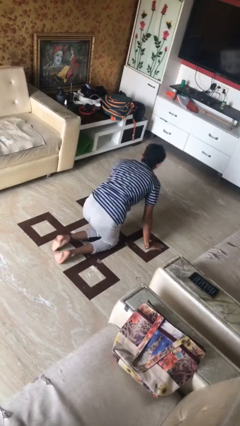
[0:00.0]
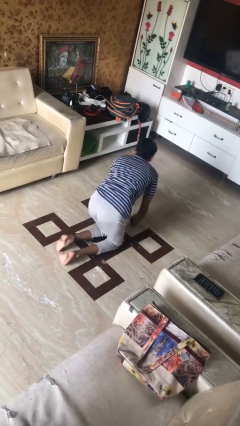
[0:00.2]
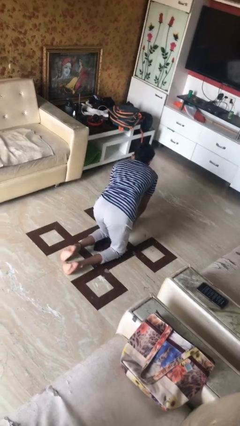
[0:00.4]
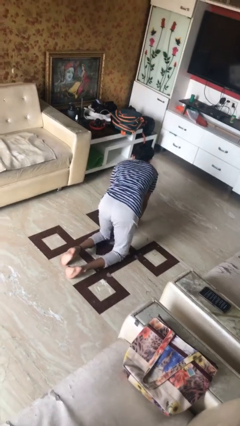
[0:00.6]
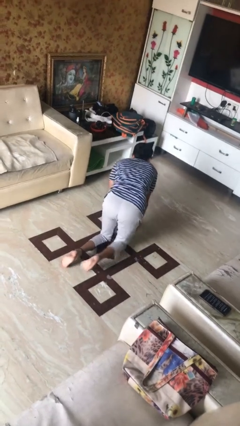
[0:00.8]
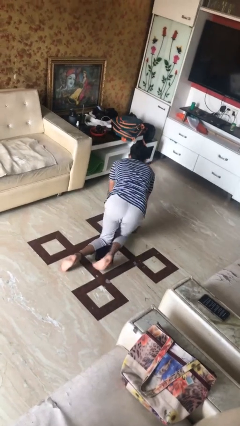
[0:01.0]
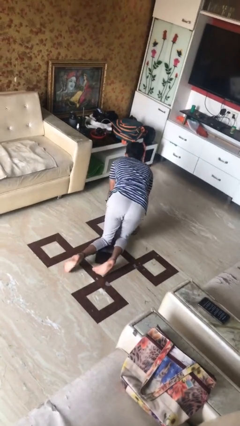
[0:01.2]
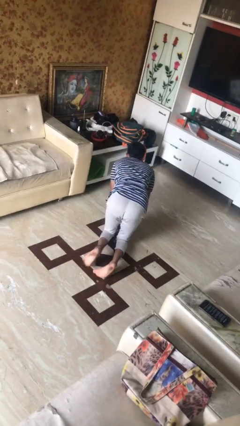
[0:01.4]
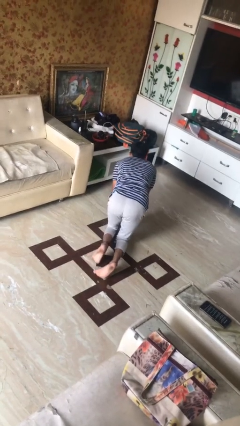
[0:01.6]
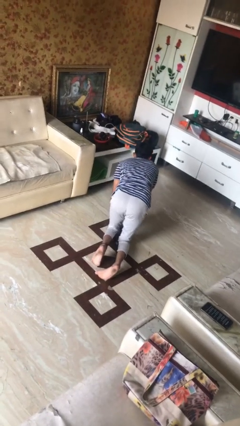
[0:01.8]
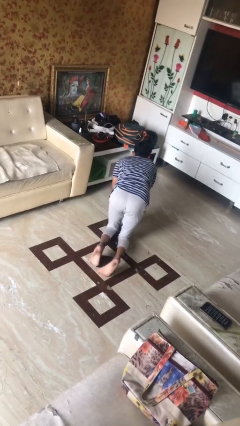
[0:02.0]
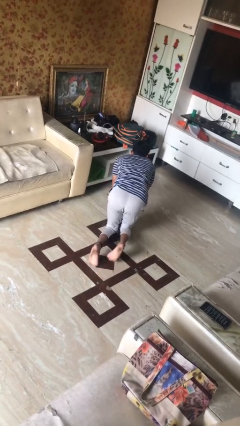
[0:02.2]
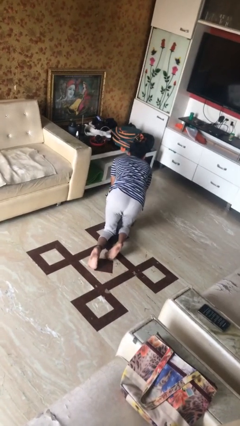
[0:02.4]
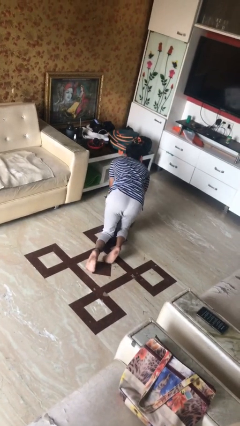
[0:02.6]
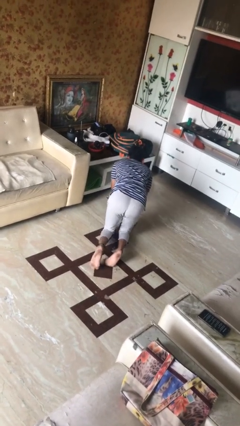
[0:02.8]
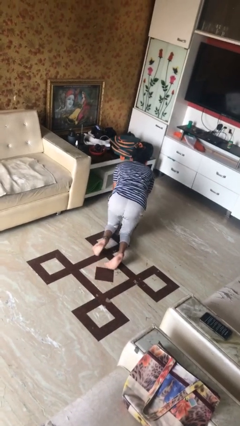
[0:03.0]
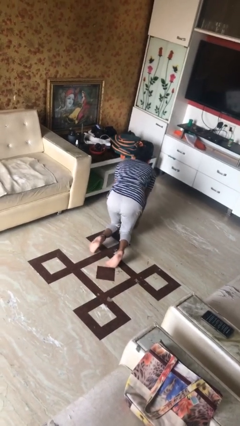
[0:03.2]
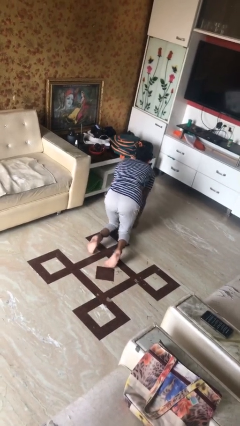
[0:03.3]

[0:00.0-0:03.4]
person crawls

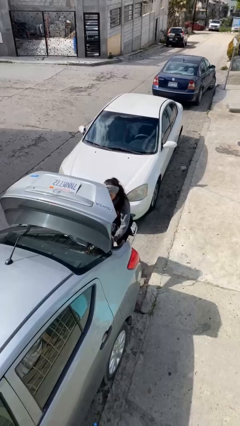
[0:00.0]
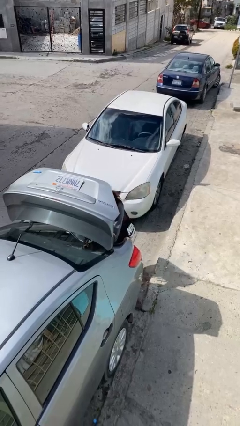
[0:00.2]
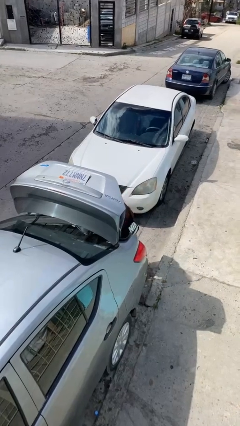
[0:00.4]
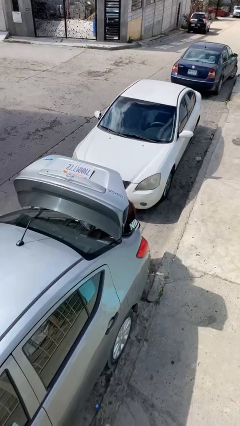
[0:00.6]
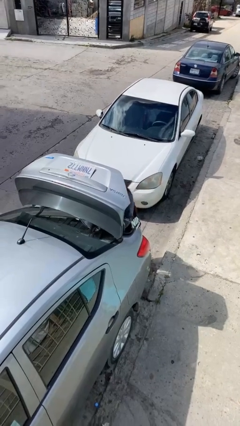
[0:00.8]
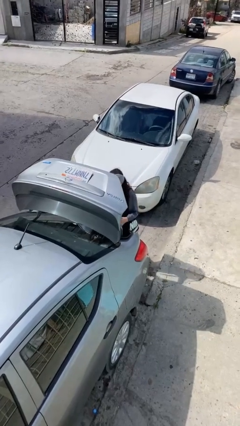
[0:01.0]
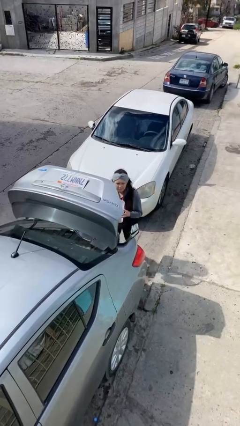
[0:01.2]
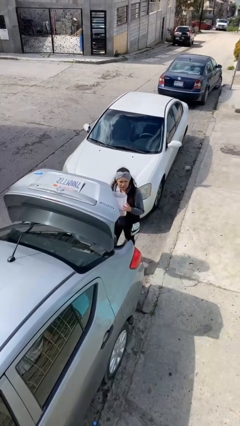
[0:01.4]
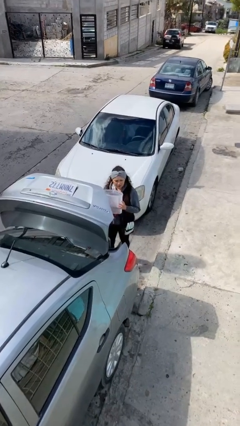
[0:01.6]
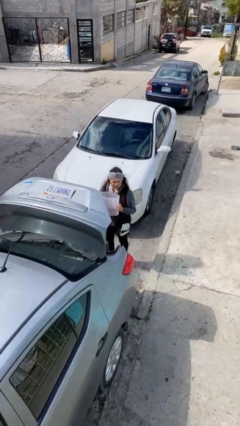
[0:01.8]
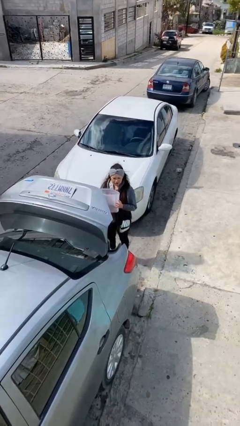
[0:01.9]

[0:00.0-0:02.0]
person unloads car

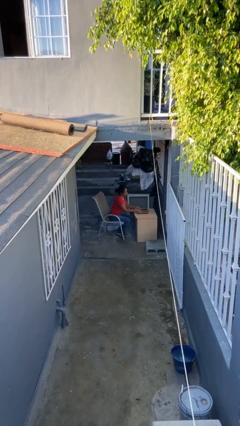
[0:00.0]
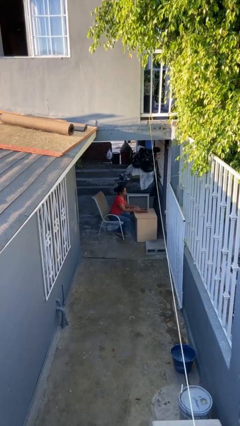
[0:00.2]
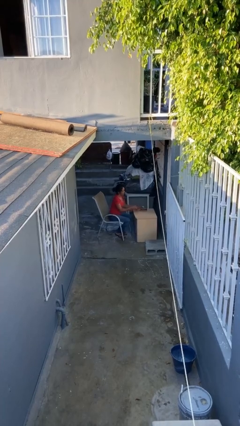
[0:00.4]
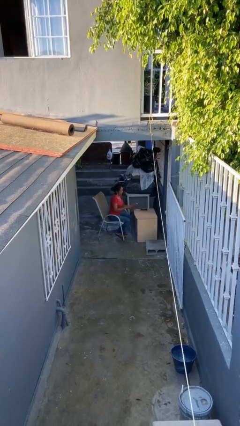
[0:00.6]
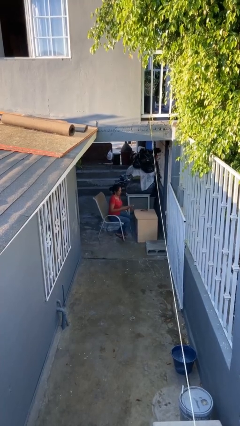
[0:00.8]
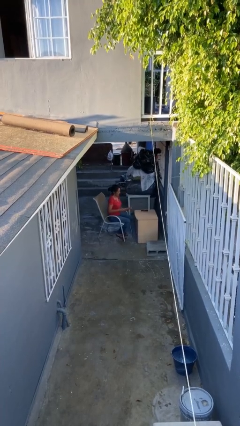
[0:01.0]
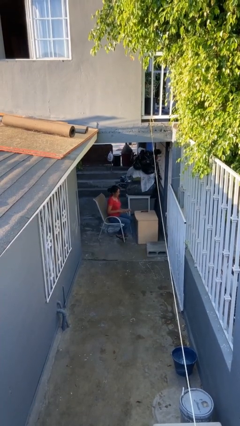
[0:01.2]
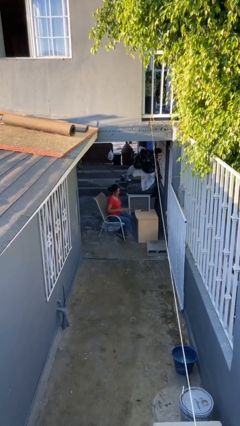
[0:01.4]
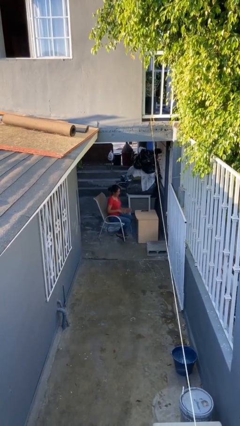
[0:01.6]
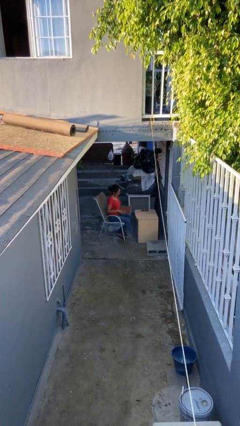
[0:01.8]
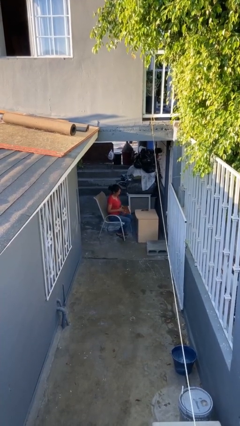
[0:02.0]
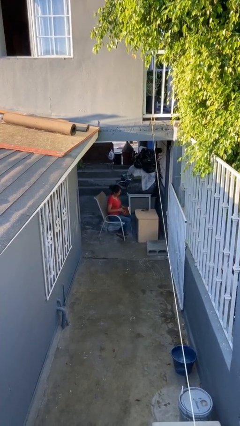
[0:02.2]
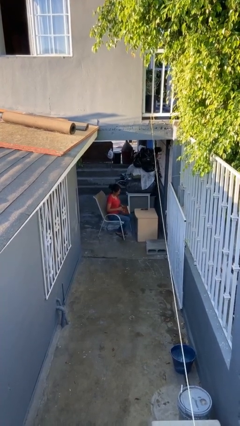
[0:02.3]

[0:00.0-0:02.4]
person picks up object from table

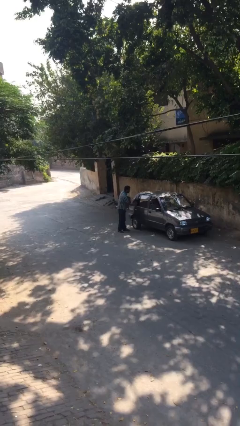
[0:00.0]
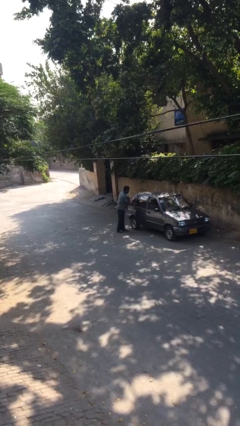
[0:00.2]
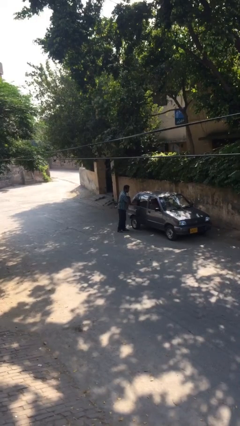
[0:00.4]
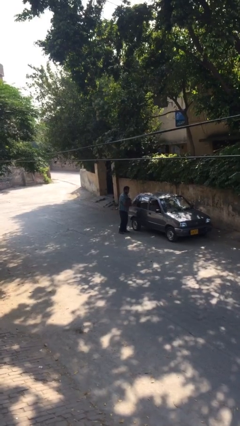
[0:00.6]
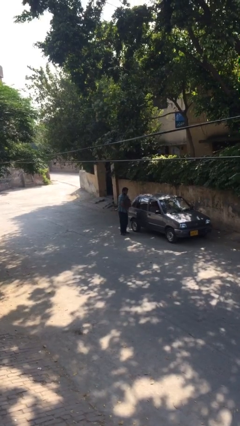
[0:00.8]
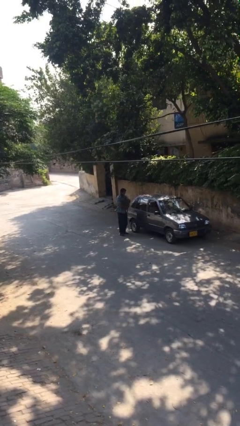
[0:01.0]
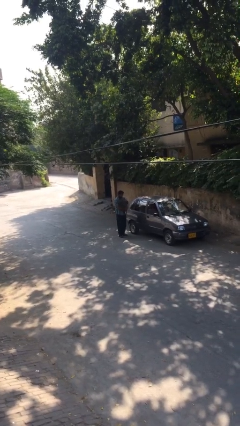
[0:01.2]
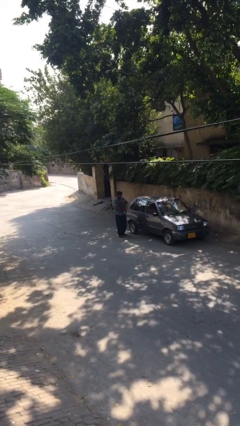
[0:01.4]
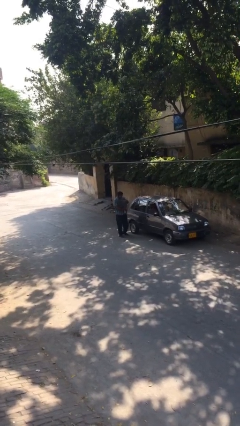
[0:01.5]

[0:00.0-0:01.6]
person closes car door

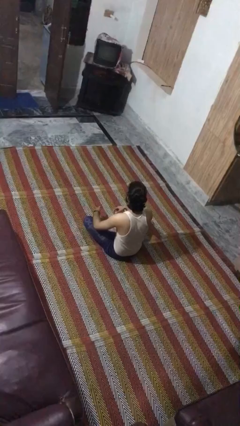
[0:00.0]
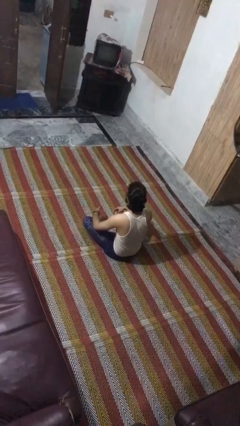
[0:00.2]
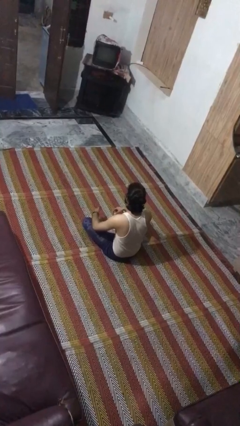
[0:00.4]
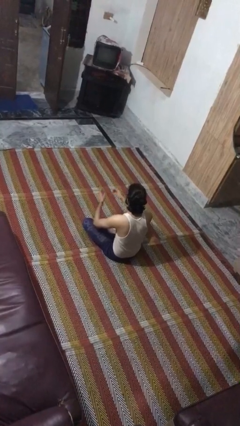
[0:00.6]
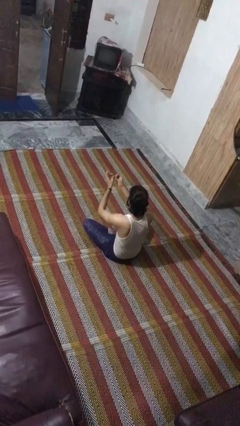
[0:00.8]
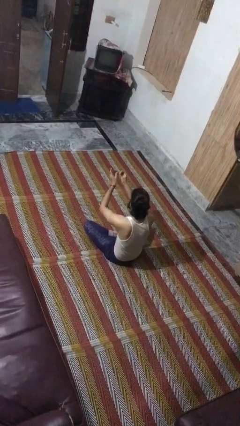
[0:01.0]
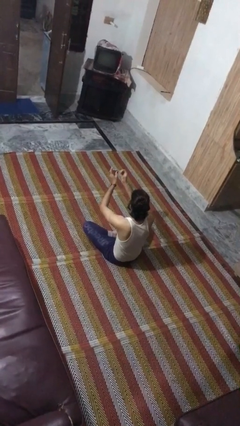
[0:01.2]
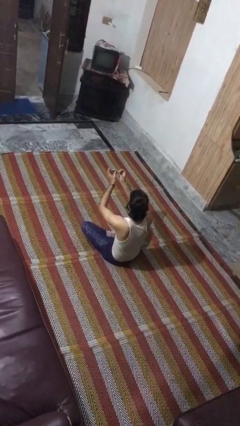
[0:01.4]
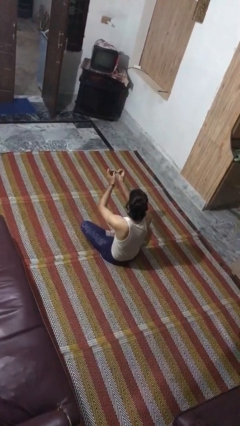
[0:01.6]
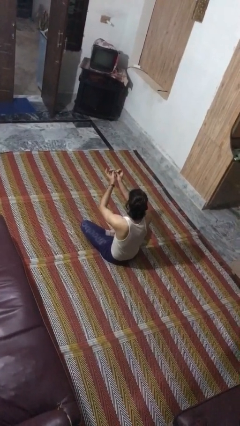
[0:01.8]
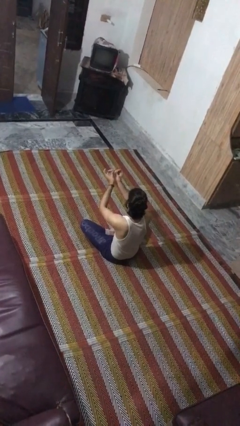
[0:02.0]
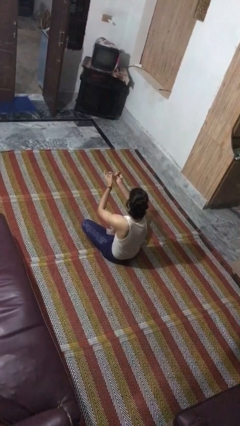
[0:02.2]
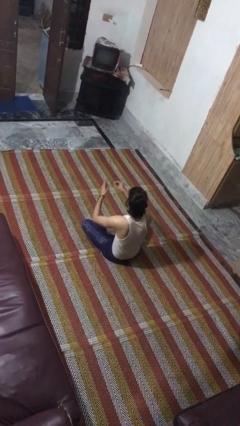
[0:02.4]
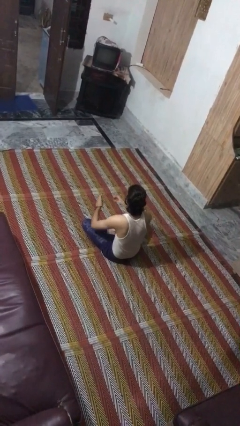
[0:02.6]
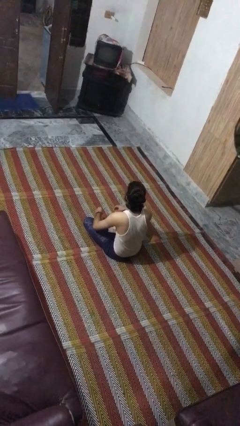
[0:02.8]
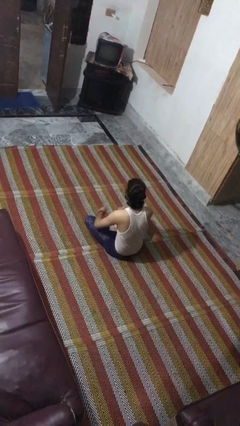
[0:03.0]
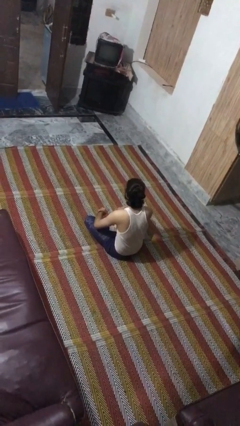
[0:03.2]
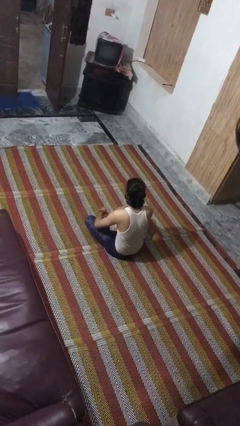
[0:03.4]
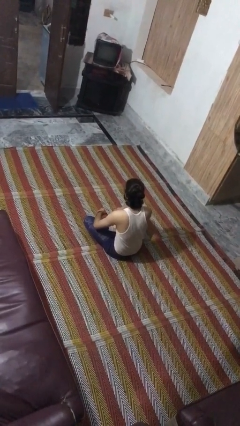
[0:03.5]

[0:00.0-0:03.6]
person clips fingernails

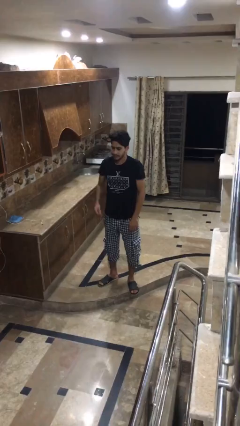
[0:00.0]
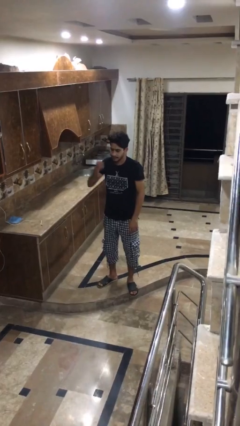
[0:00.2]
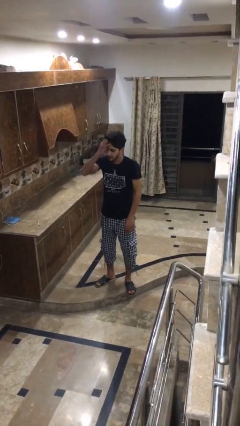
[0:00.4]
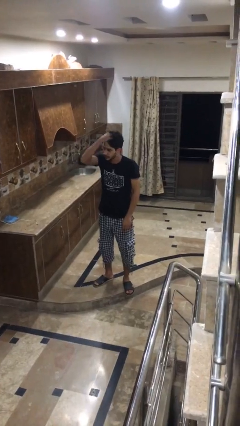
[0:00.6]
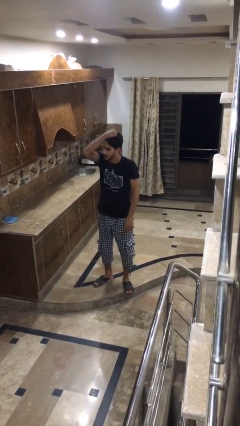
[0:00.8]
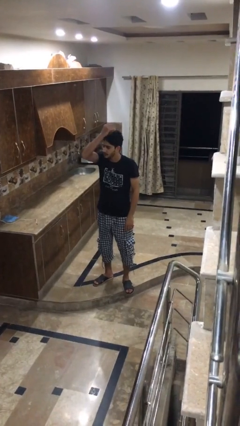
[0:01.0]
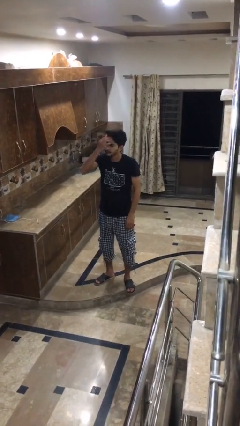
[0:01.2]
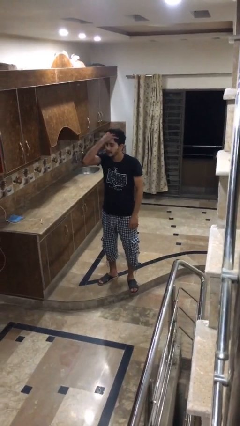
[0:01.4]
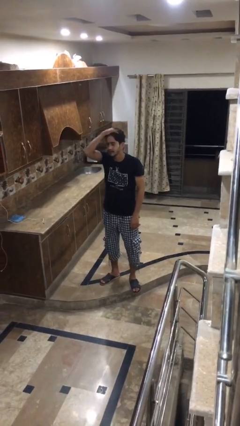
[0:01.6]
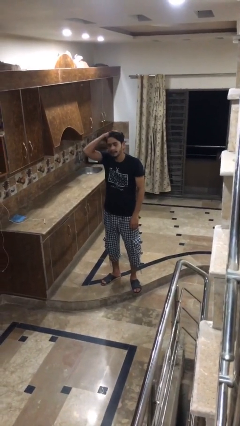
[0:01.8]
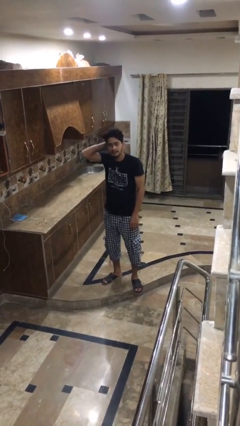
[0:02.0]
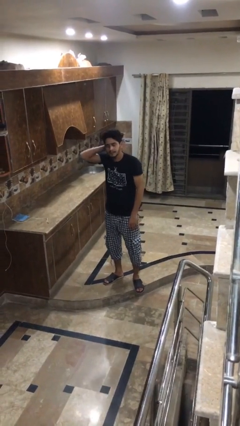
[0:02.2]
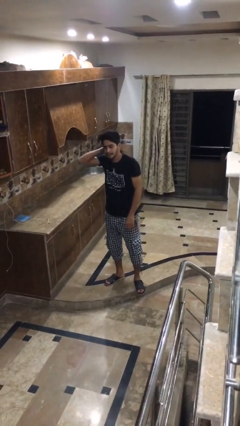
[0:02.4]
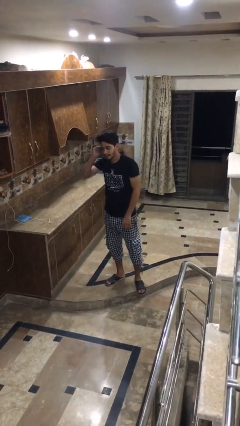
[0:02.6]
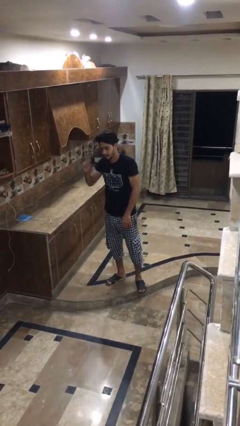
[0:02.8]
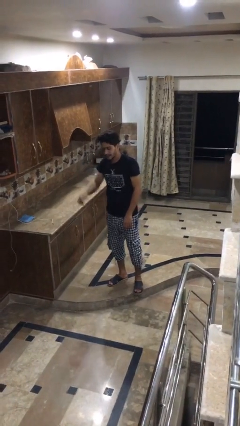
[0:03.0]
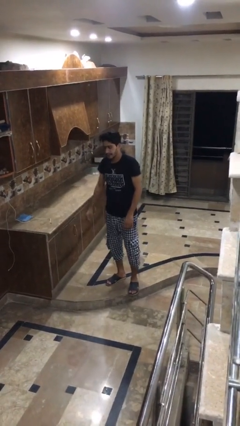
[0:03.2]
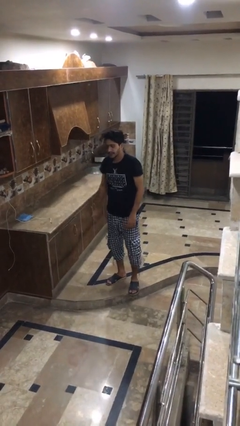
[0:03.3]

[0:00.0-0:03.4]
person strokes hair

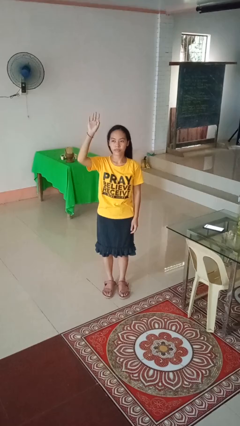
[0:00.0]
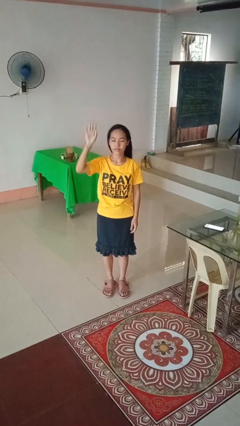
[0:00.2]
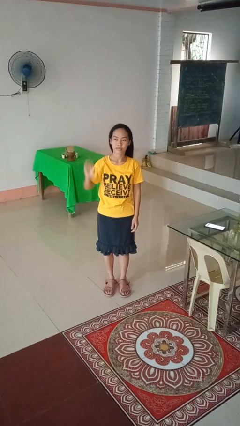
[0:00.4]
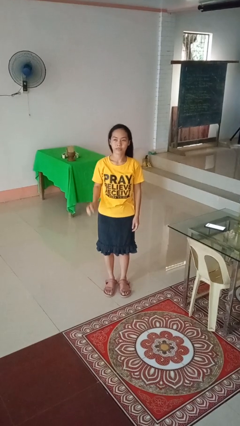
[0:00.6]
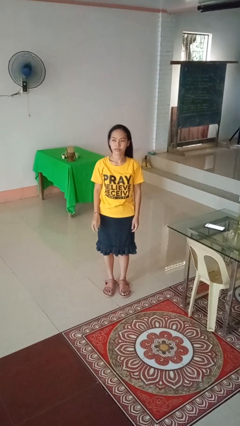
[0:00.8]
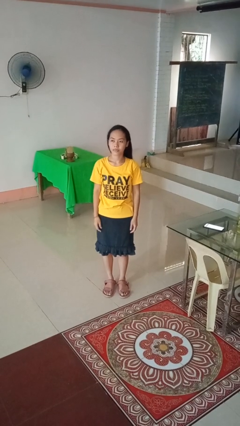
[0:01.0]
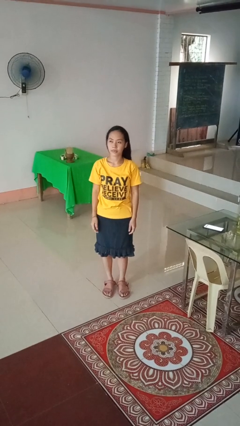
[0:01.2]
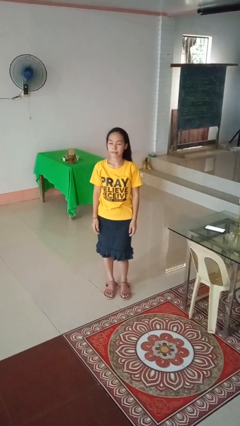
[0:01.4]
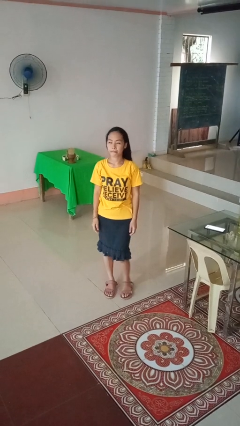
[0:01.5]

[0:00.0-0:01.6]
person gestures lower hand
